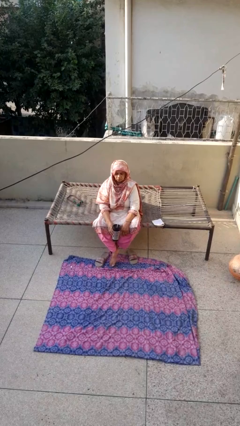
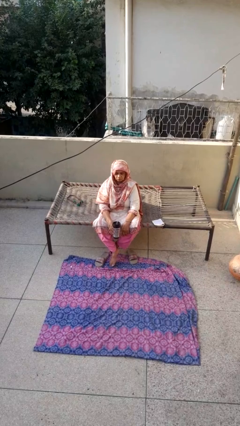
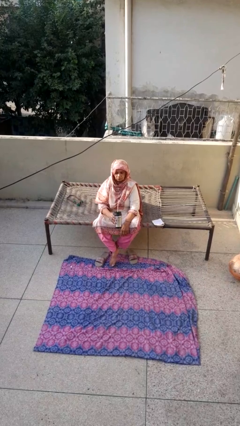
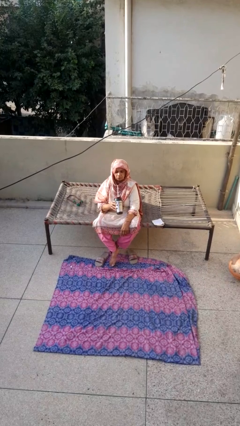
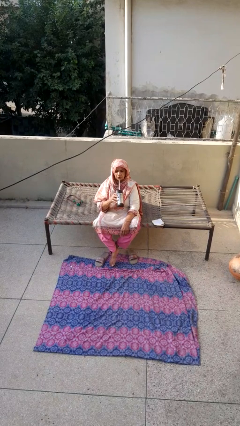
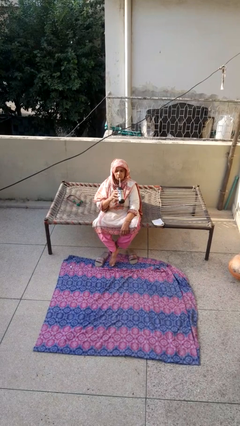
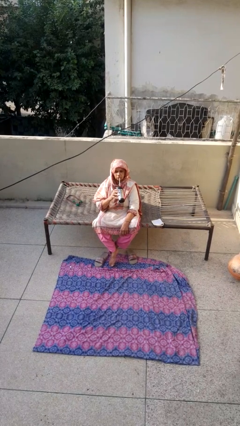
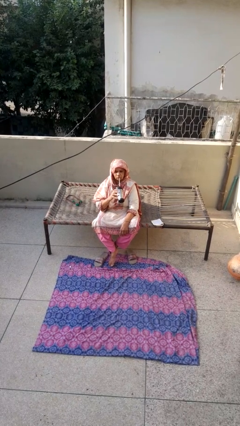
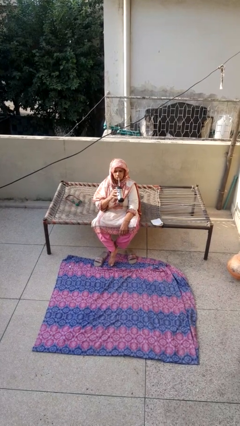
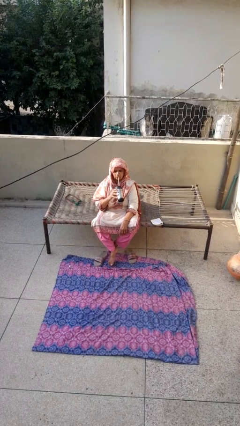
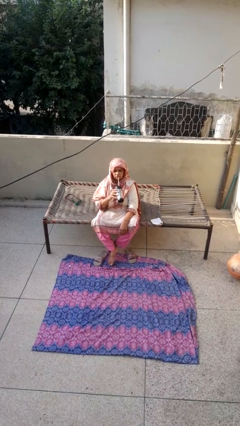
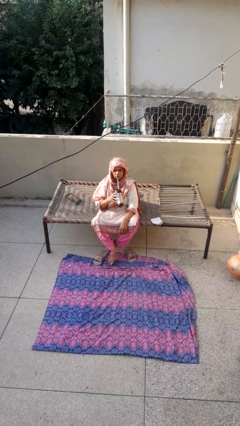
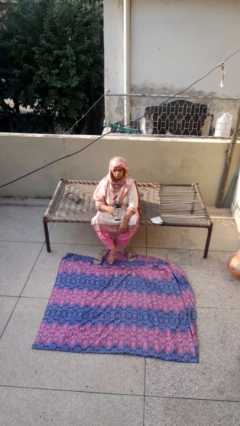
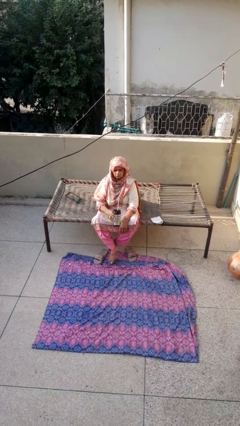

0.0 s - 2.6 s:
person drinks from straw

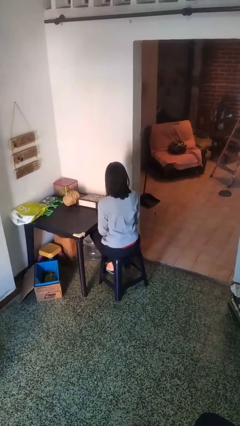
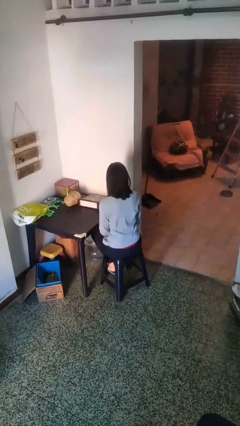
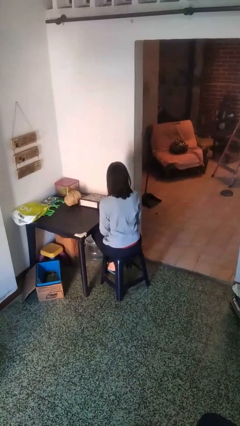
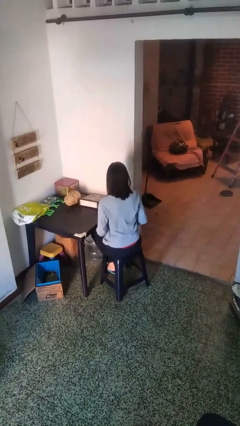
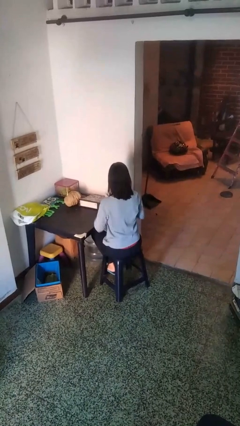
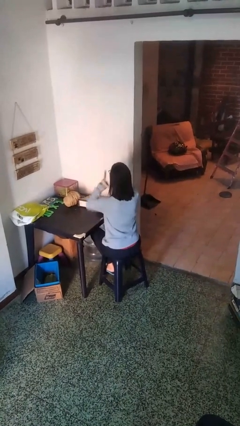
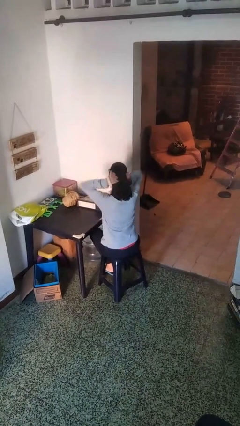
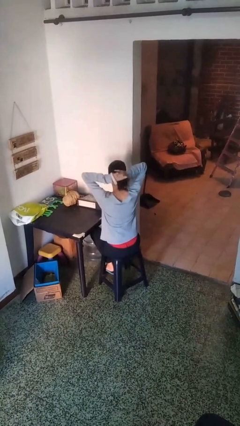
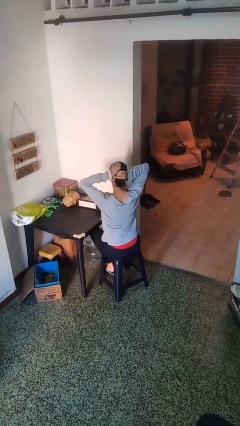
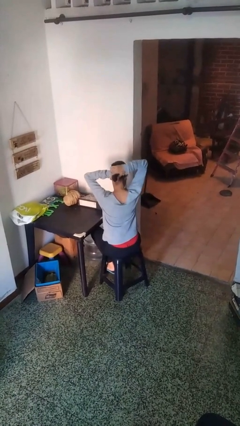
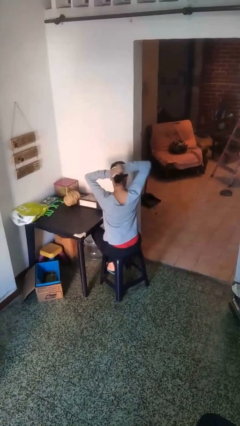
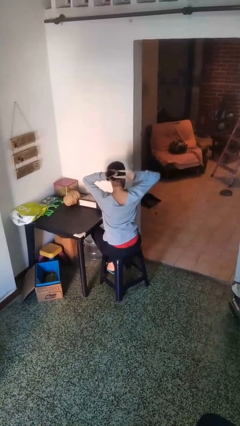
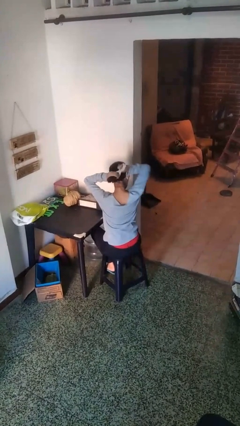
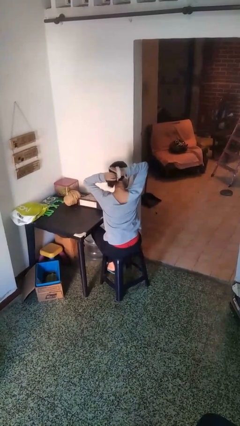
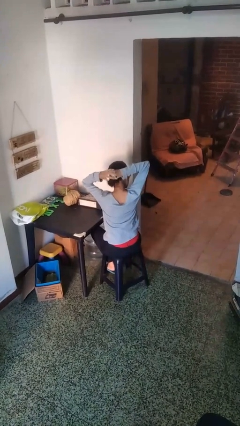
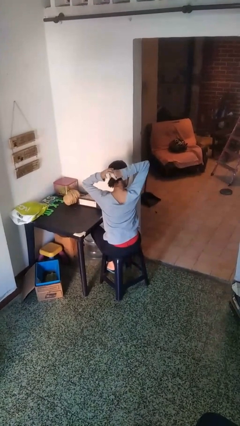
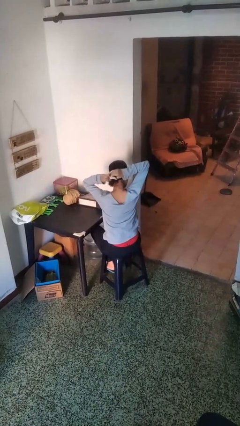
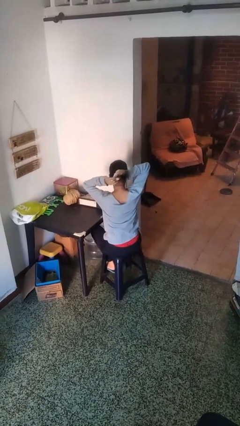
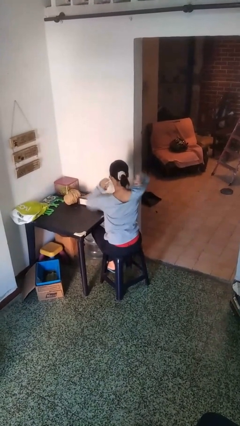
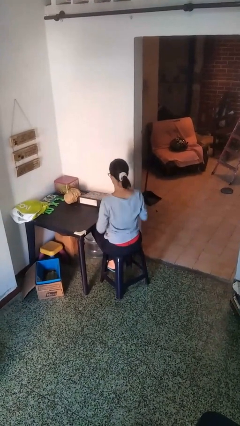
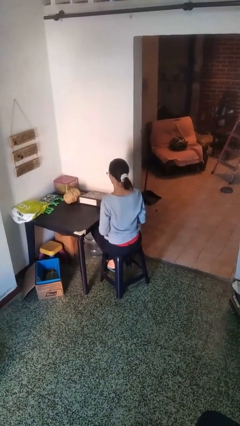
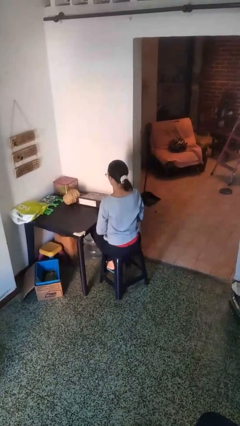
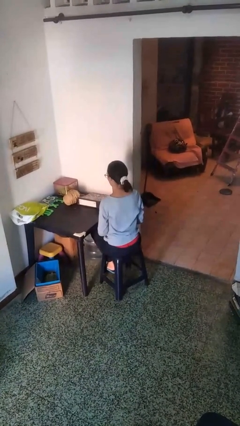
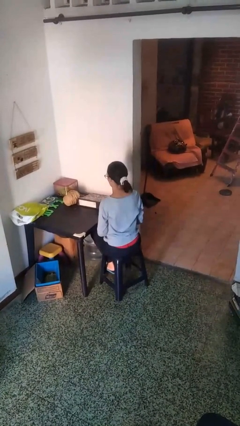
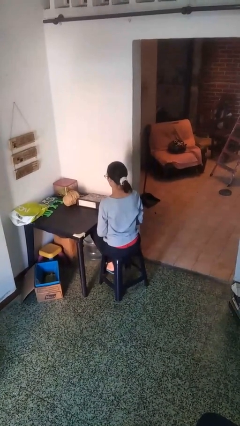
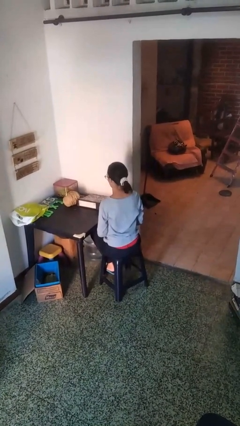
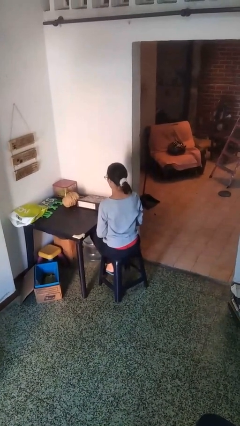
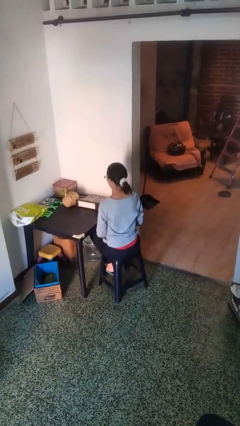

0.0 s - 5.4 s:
person puts hair in ponytail

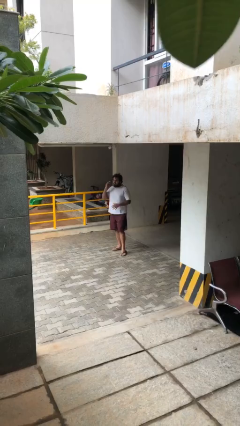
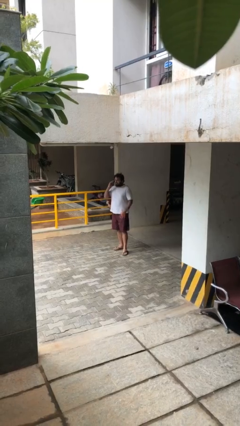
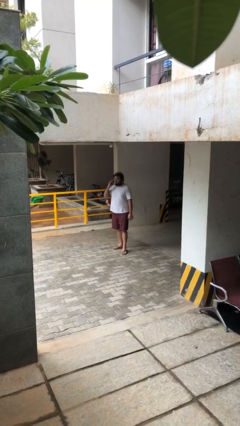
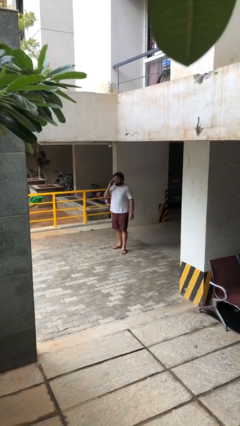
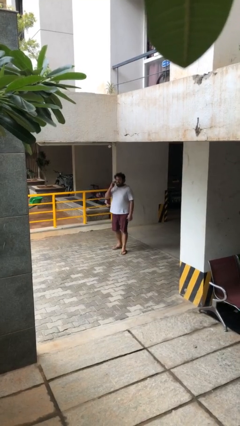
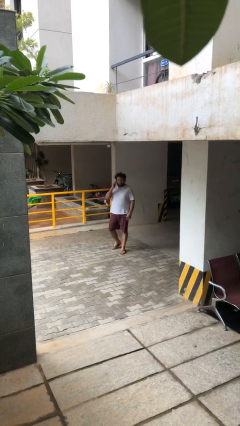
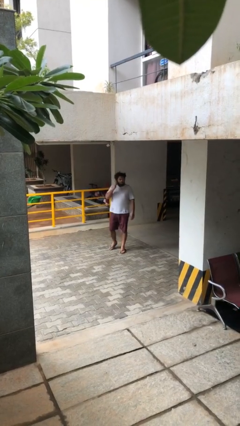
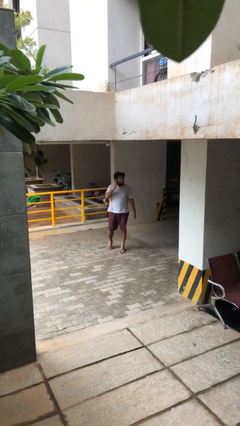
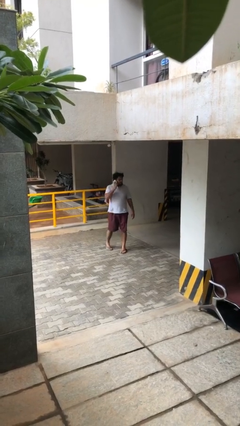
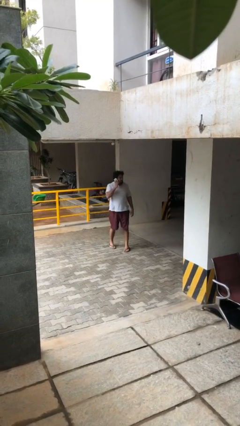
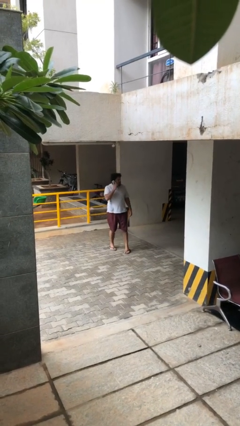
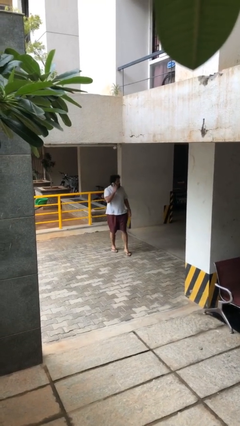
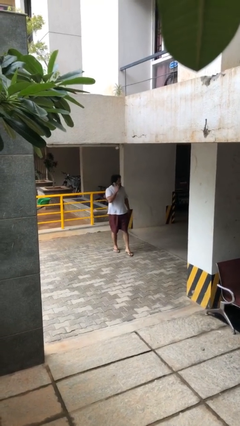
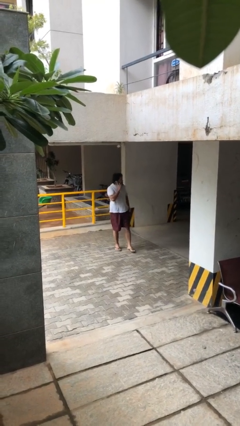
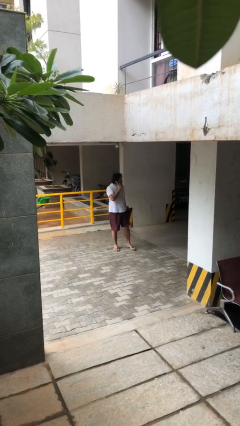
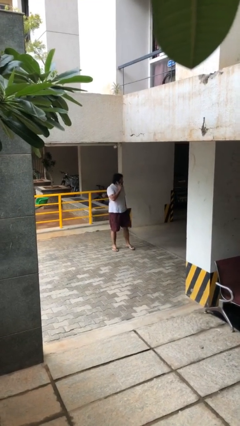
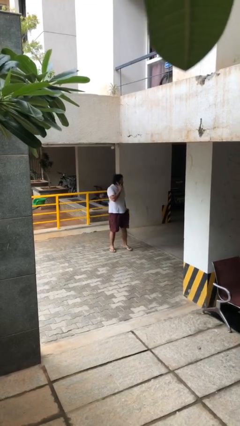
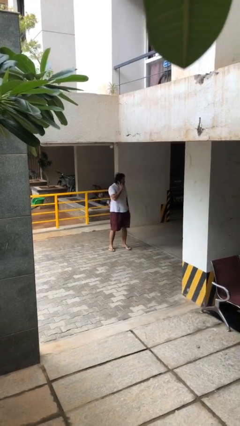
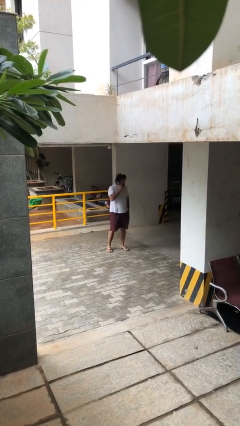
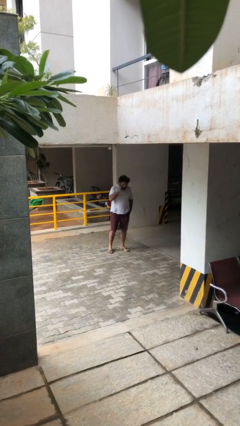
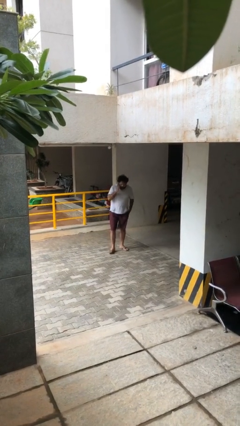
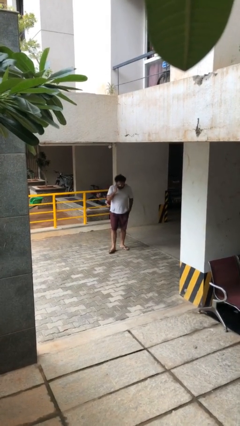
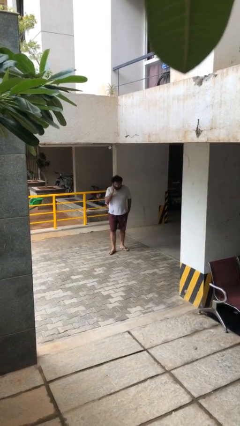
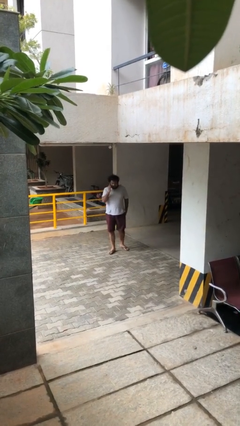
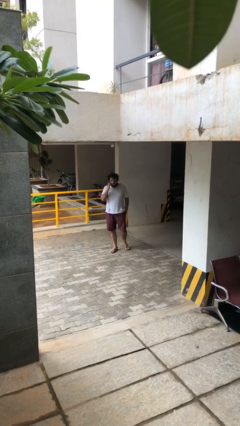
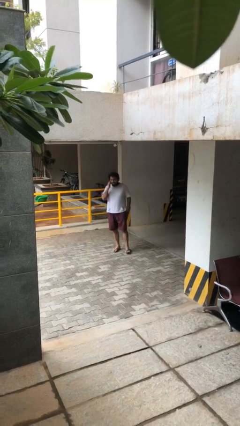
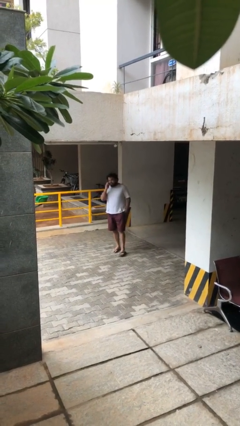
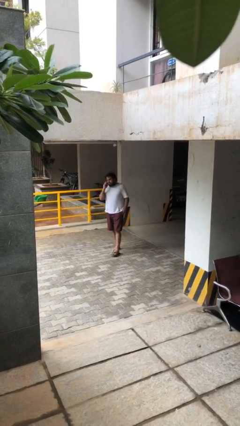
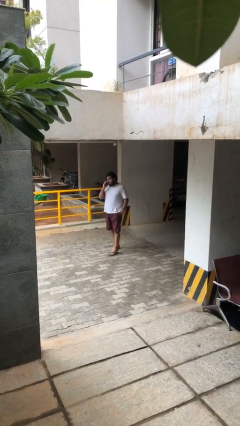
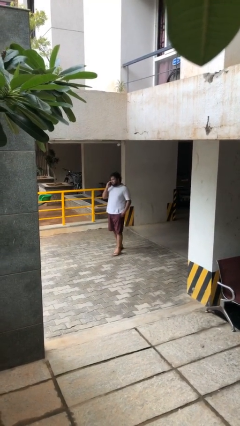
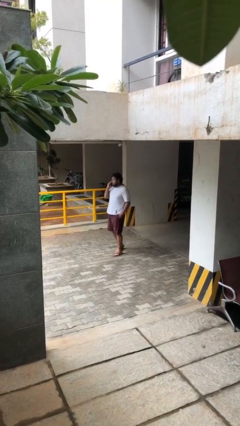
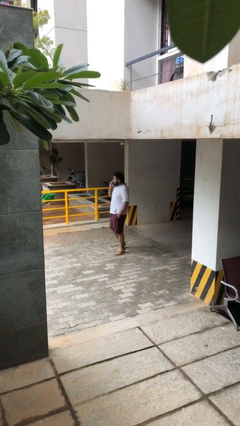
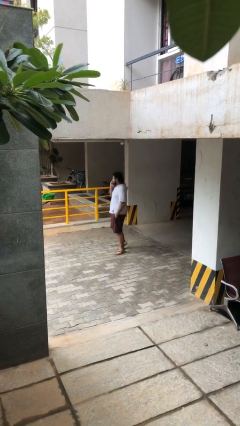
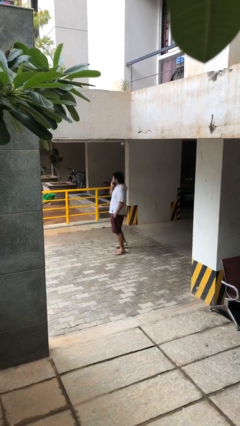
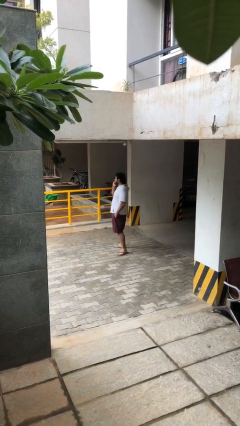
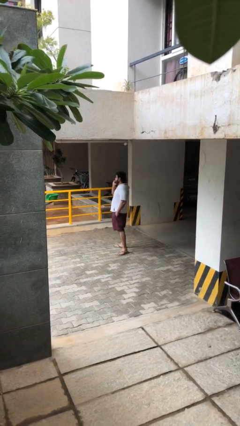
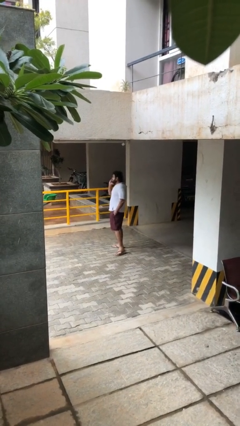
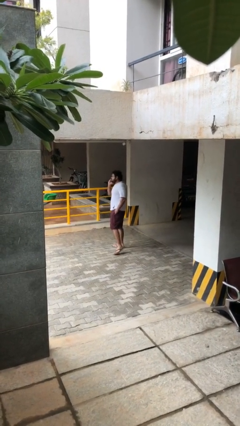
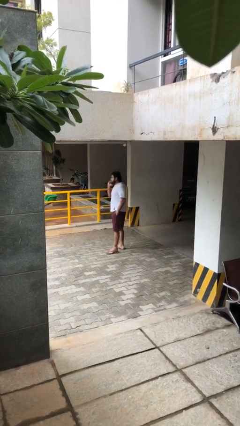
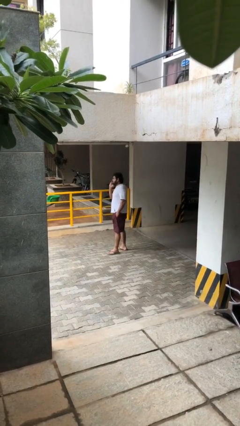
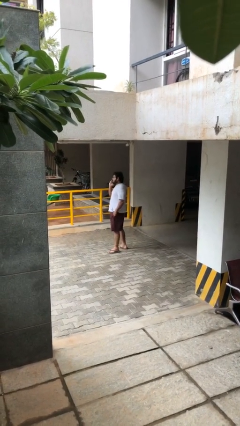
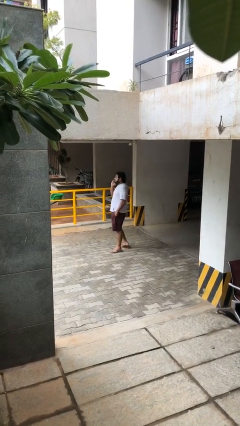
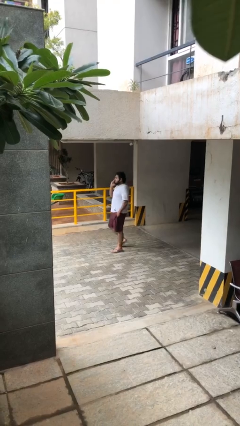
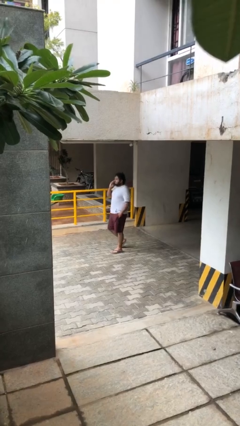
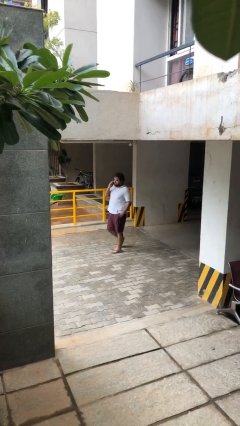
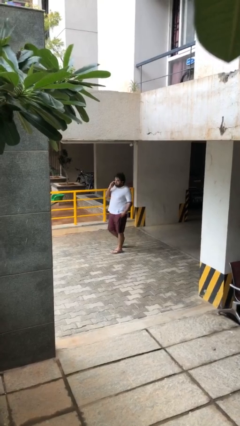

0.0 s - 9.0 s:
person talks on phone

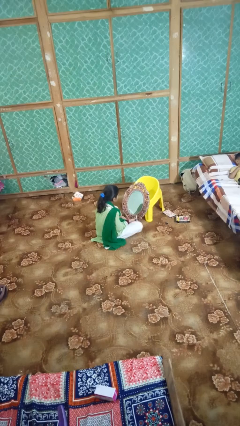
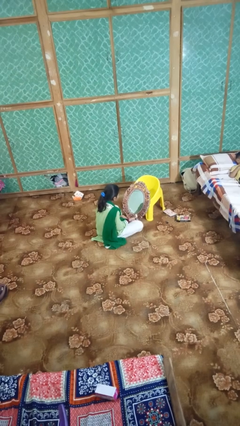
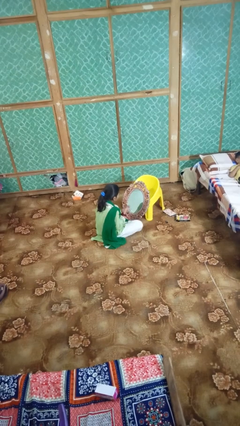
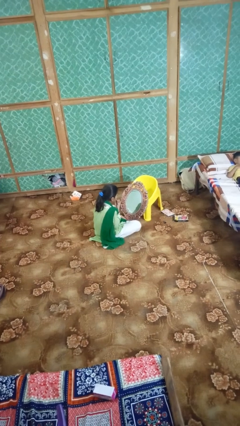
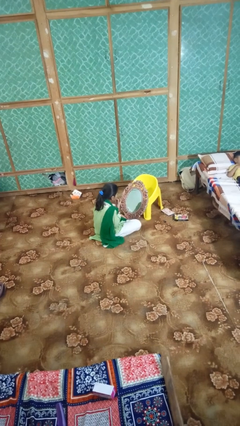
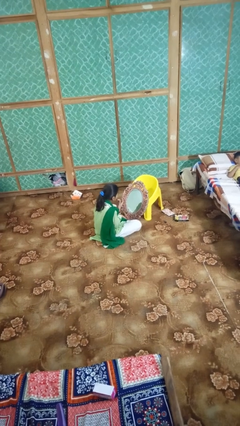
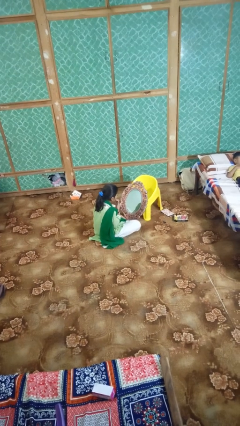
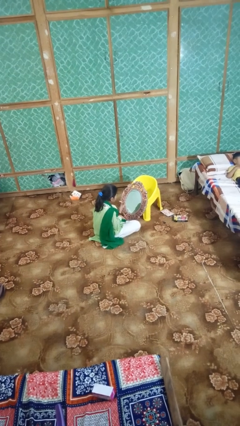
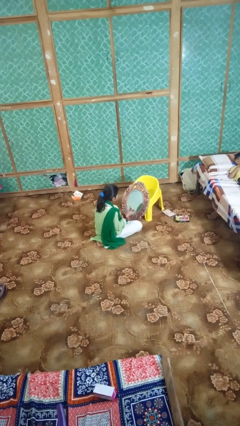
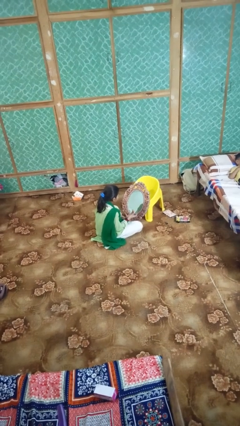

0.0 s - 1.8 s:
person applies lip makeup
